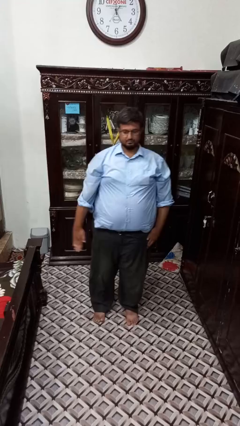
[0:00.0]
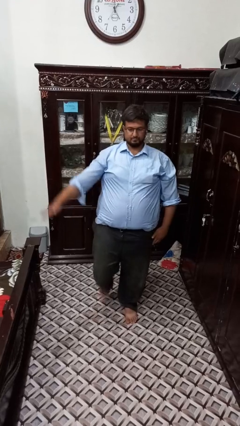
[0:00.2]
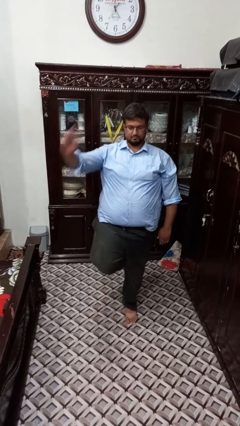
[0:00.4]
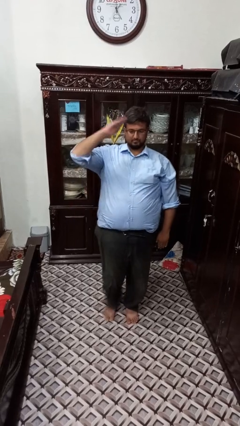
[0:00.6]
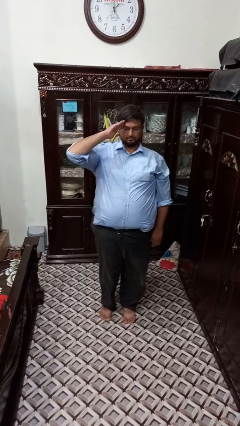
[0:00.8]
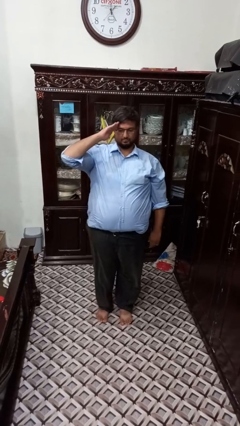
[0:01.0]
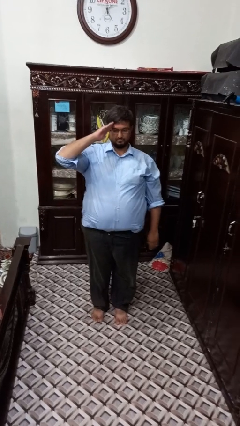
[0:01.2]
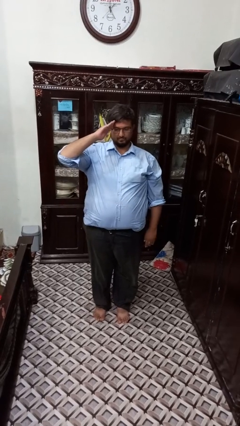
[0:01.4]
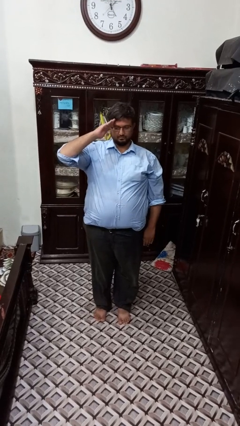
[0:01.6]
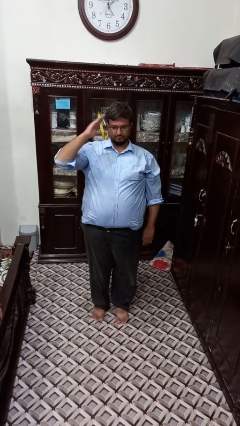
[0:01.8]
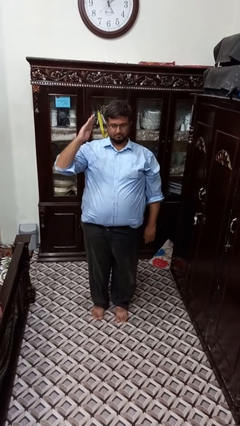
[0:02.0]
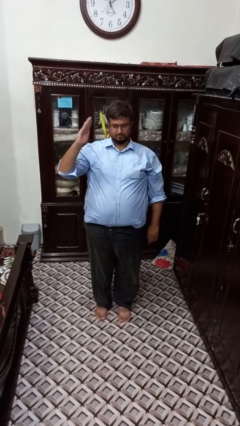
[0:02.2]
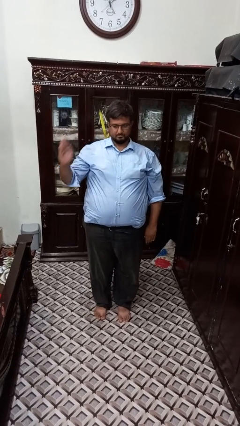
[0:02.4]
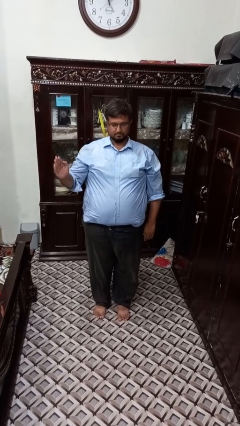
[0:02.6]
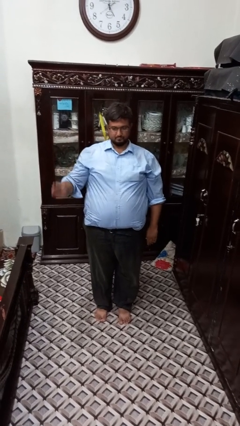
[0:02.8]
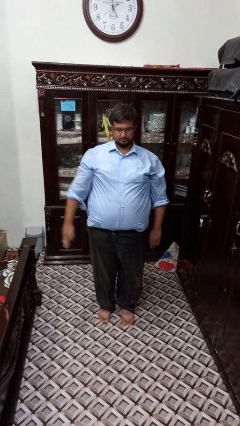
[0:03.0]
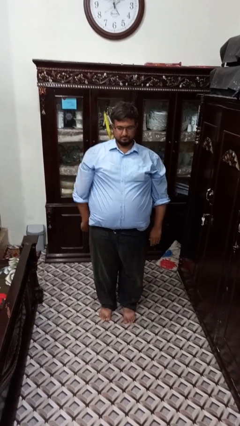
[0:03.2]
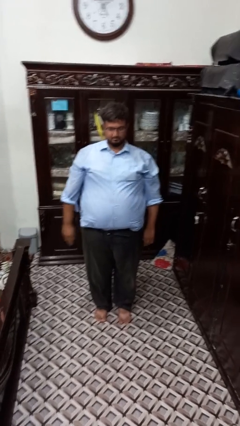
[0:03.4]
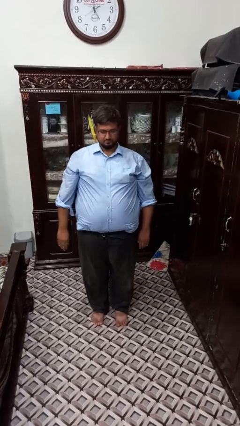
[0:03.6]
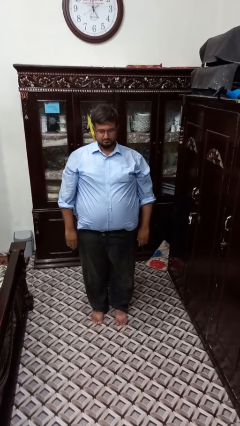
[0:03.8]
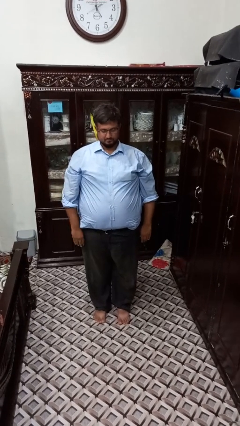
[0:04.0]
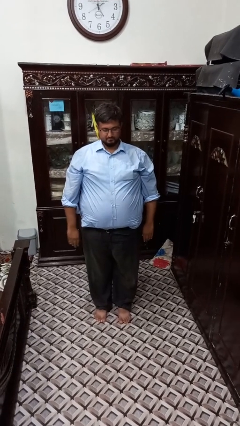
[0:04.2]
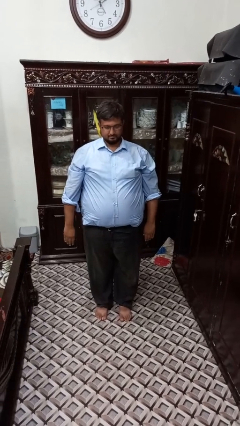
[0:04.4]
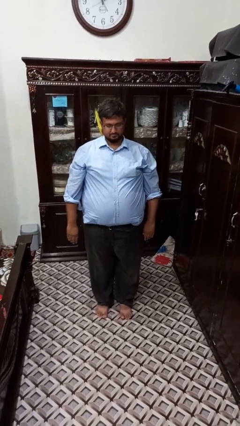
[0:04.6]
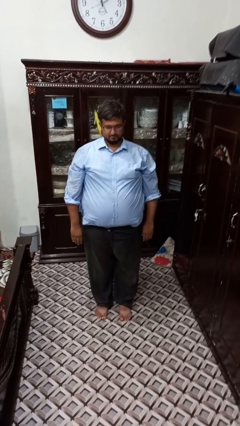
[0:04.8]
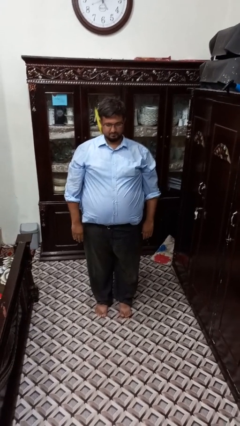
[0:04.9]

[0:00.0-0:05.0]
person salutes

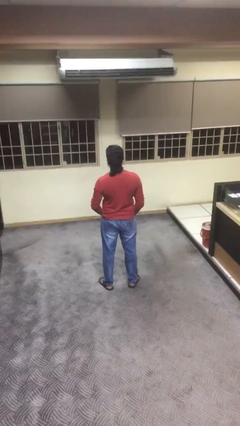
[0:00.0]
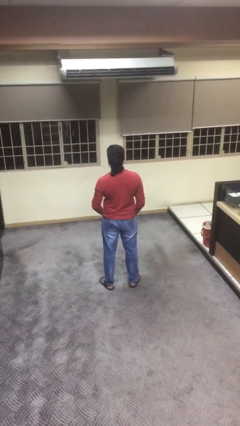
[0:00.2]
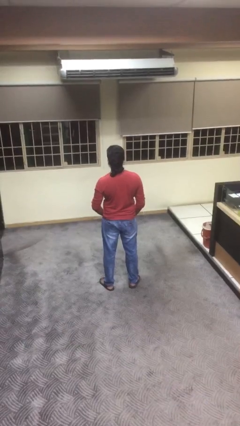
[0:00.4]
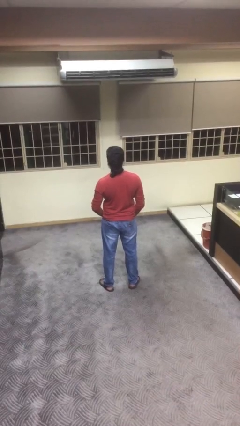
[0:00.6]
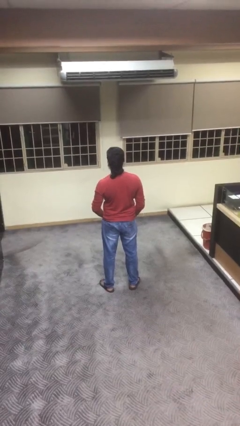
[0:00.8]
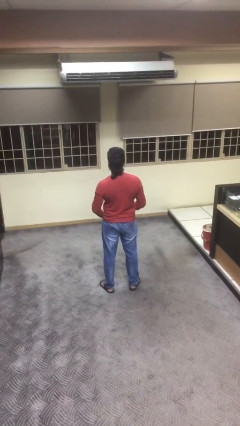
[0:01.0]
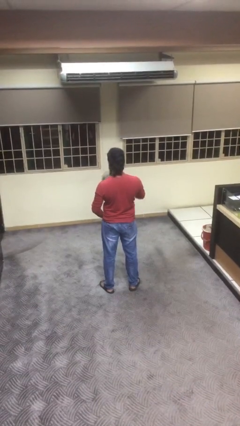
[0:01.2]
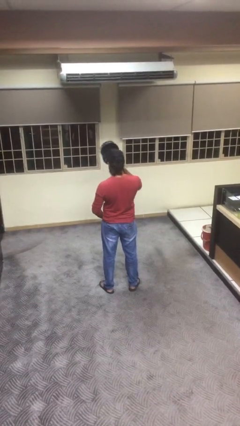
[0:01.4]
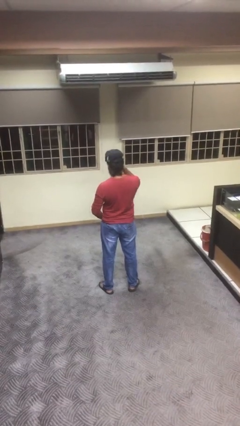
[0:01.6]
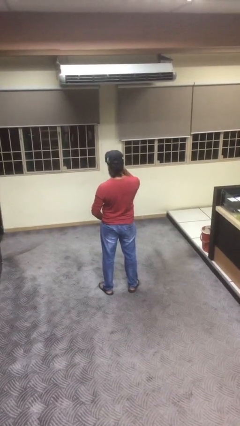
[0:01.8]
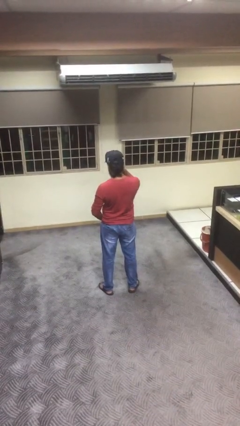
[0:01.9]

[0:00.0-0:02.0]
person puts on hat

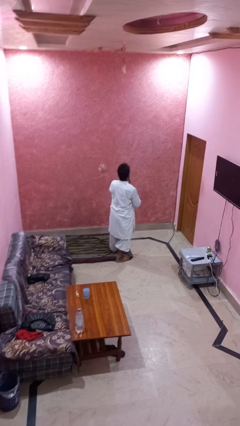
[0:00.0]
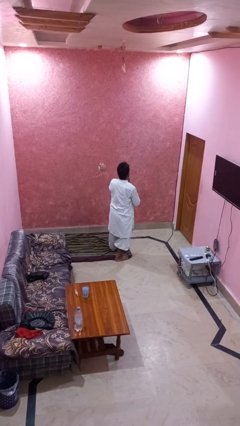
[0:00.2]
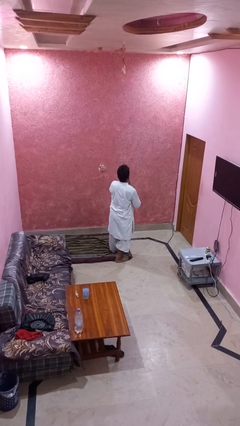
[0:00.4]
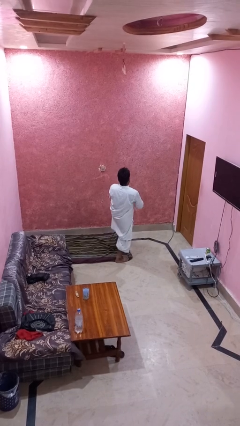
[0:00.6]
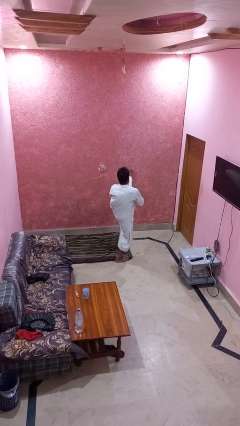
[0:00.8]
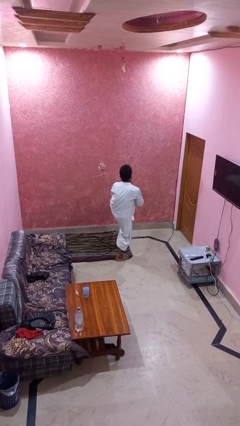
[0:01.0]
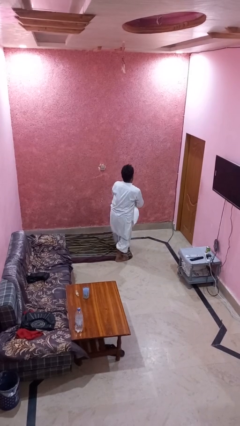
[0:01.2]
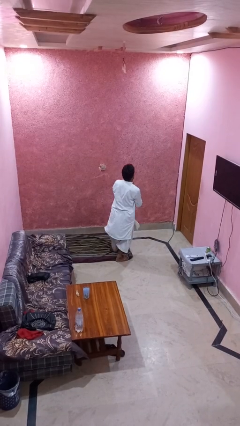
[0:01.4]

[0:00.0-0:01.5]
person karate kicks

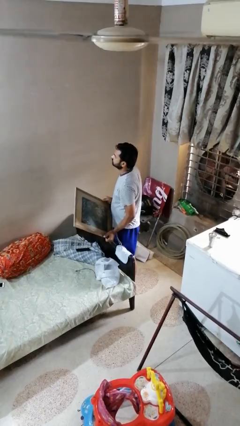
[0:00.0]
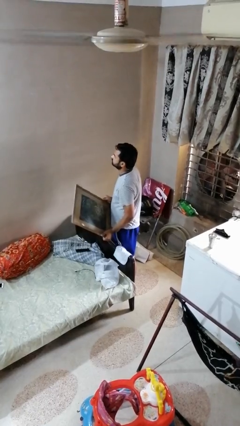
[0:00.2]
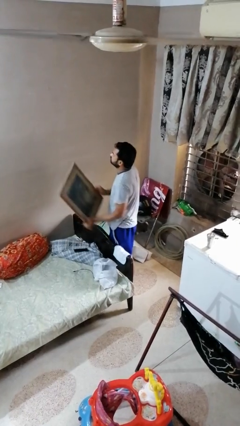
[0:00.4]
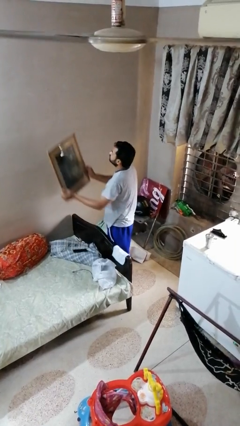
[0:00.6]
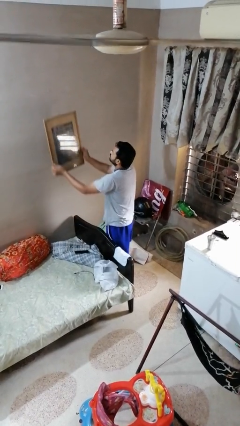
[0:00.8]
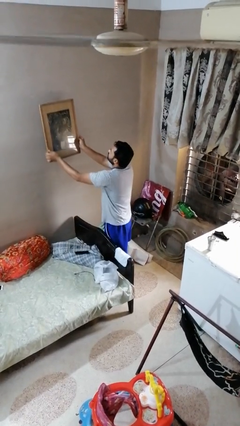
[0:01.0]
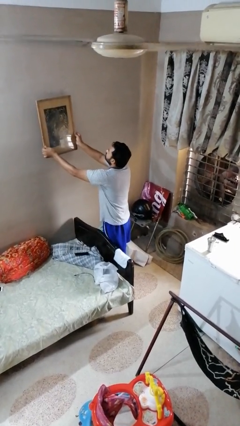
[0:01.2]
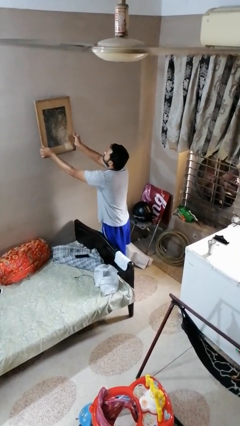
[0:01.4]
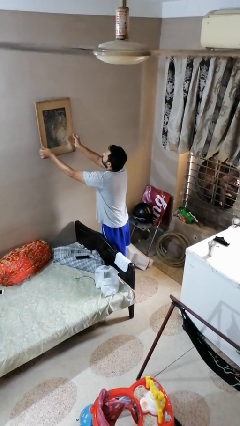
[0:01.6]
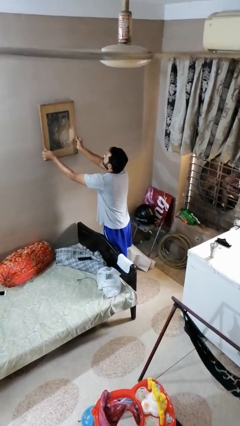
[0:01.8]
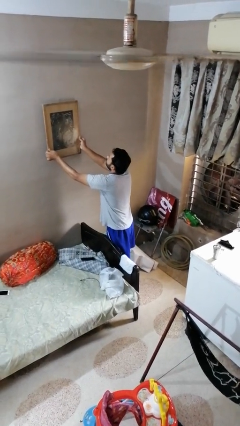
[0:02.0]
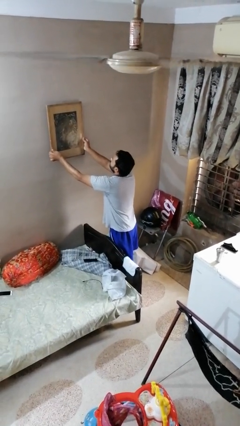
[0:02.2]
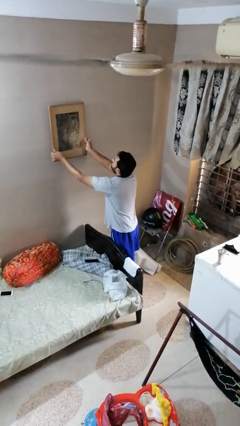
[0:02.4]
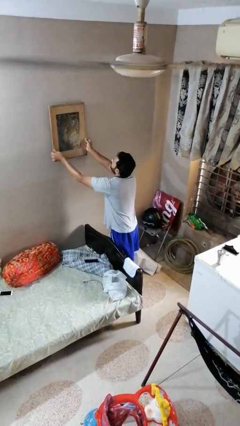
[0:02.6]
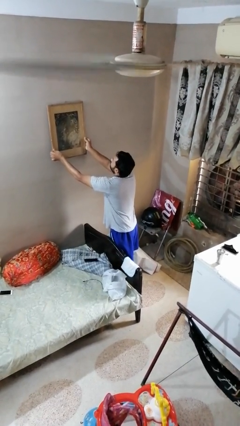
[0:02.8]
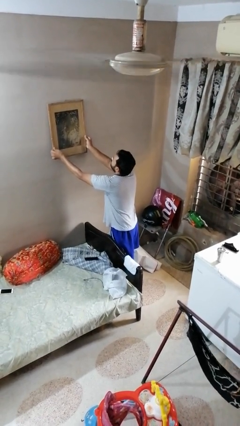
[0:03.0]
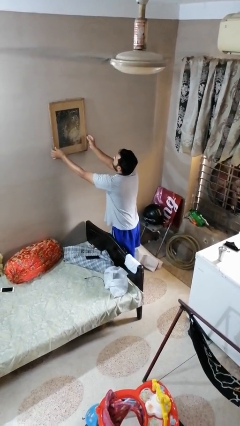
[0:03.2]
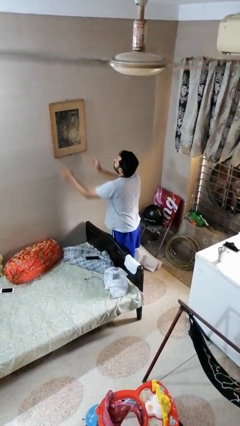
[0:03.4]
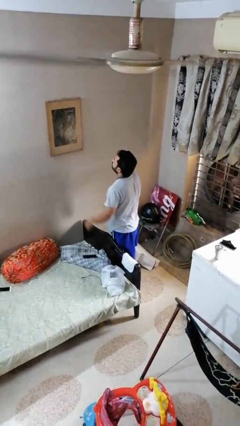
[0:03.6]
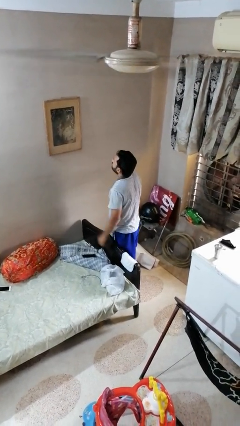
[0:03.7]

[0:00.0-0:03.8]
person puts up picture frame

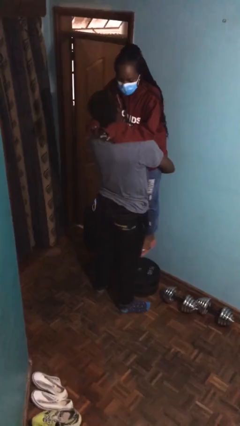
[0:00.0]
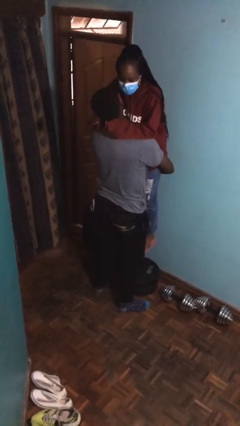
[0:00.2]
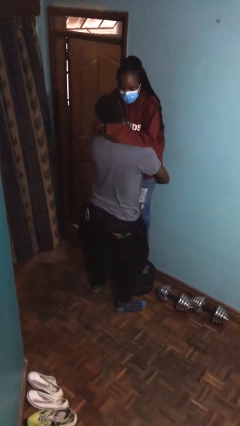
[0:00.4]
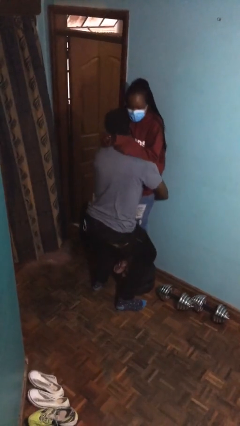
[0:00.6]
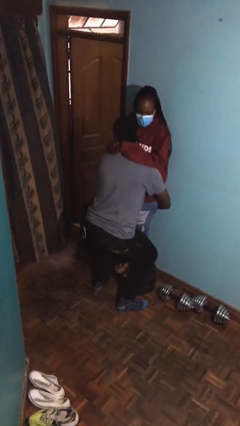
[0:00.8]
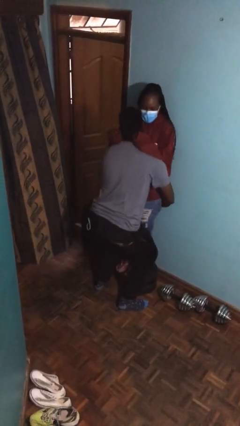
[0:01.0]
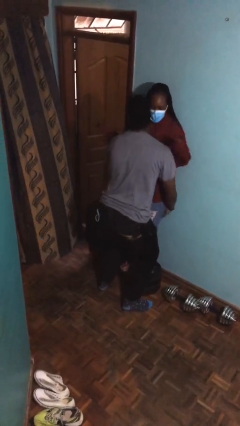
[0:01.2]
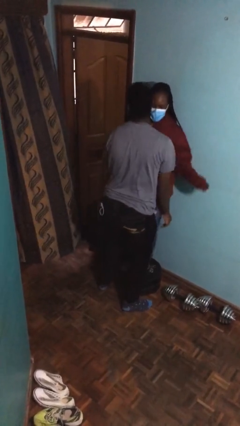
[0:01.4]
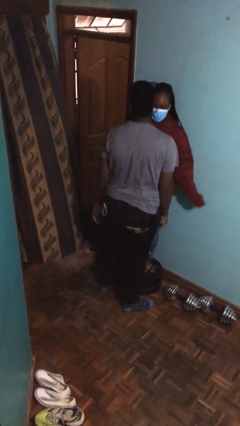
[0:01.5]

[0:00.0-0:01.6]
person puts down person

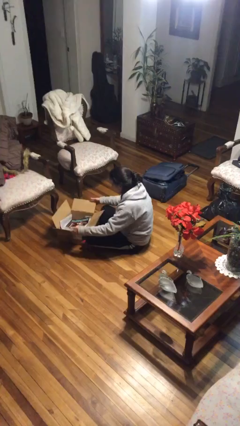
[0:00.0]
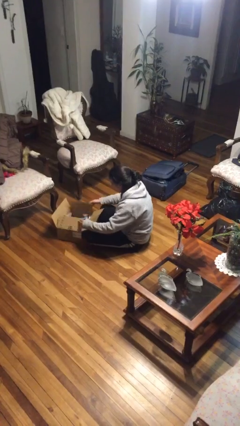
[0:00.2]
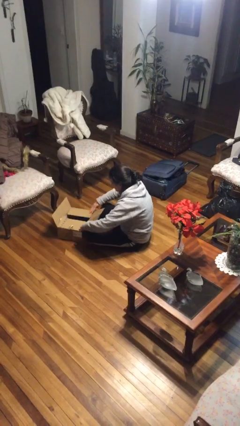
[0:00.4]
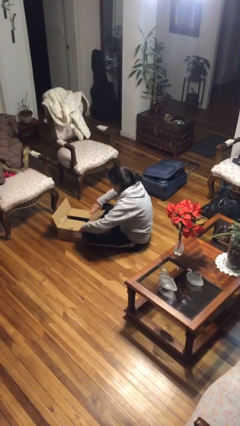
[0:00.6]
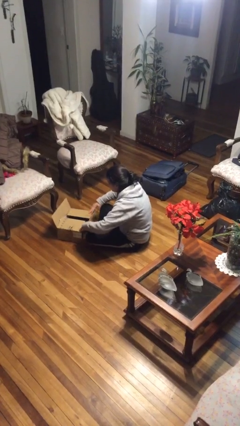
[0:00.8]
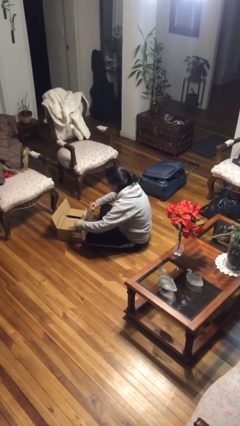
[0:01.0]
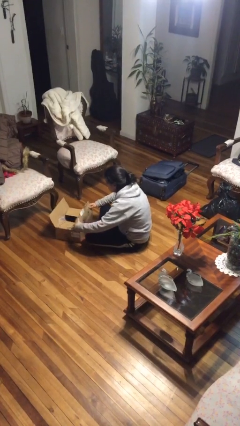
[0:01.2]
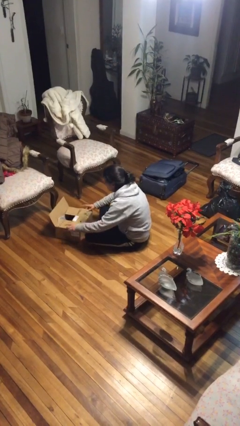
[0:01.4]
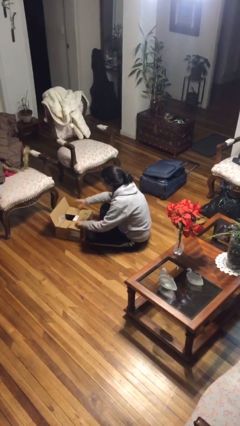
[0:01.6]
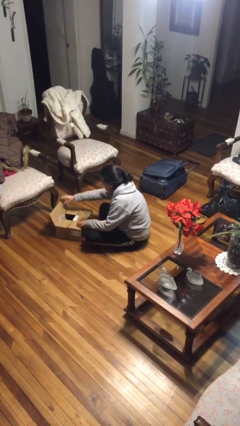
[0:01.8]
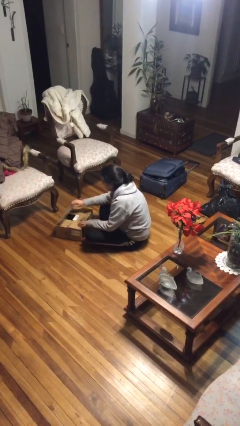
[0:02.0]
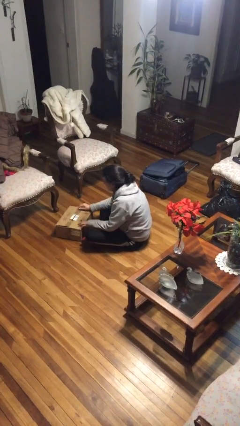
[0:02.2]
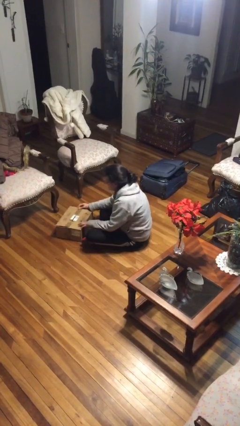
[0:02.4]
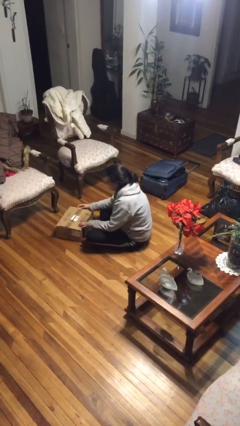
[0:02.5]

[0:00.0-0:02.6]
person closes box

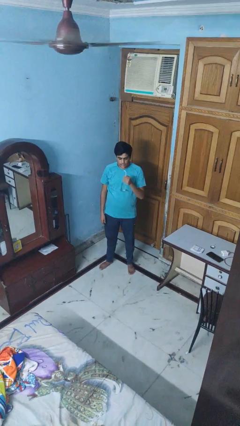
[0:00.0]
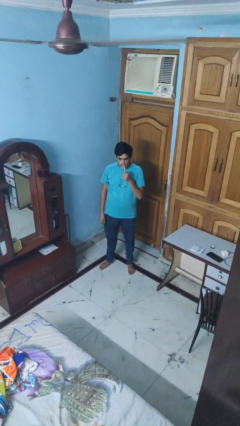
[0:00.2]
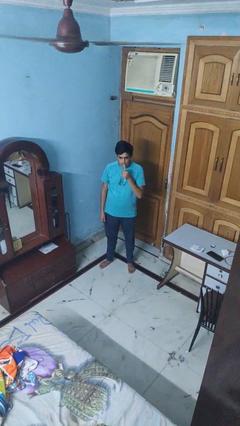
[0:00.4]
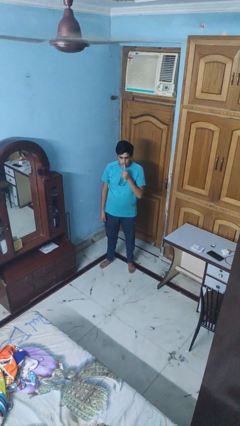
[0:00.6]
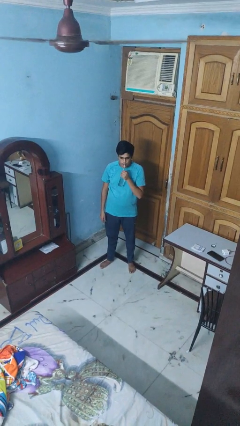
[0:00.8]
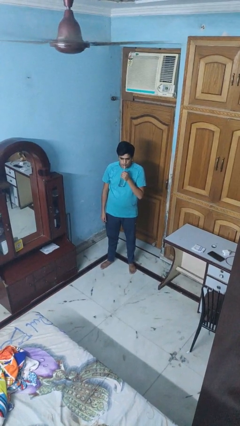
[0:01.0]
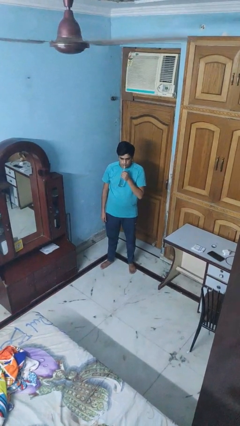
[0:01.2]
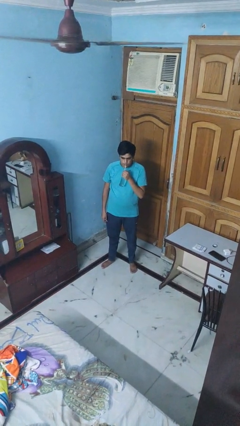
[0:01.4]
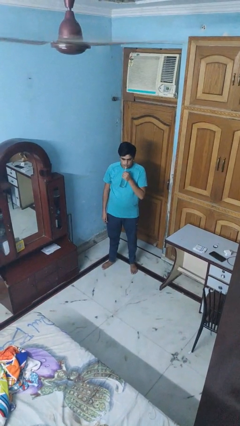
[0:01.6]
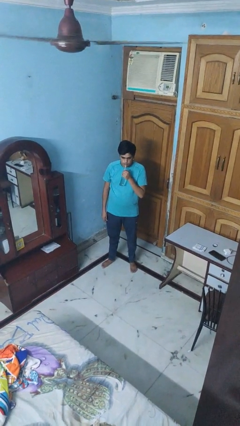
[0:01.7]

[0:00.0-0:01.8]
person drinks from straw
